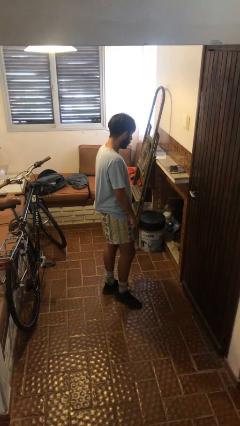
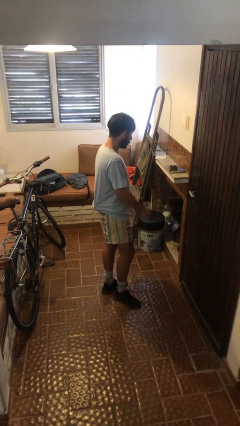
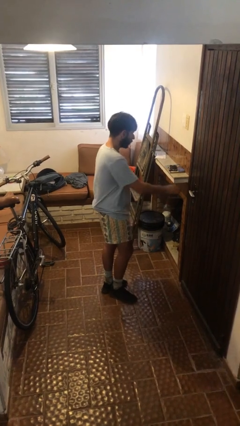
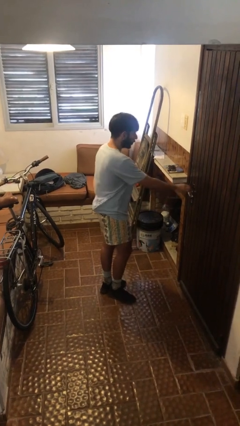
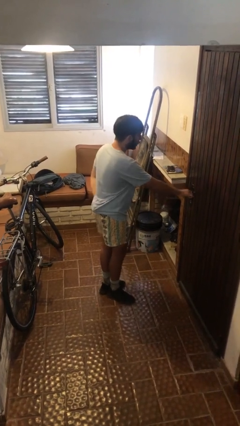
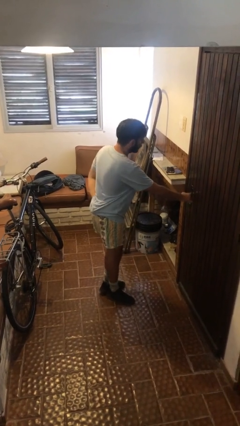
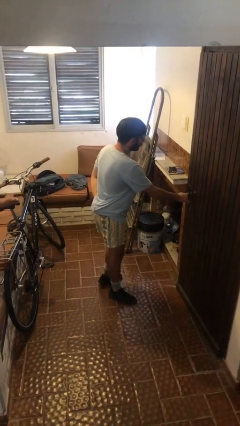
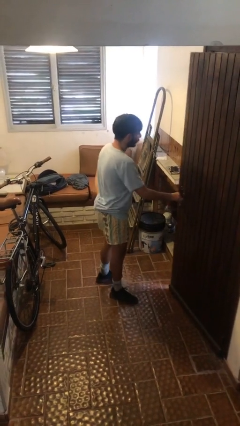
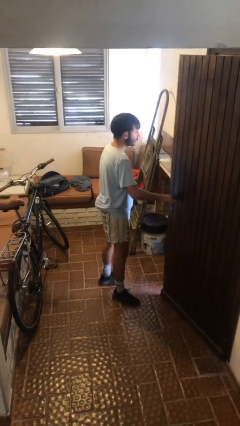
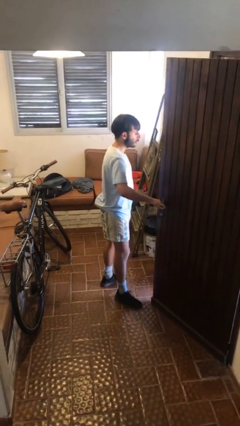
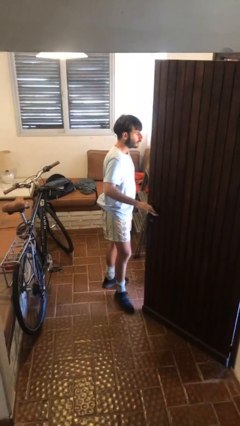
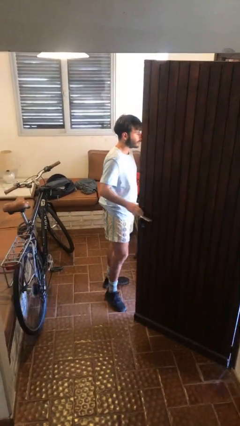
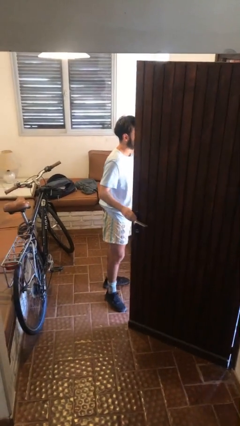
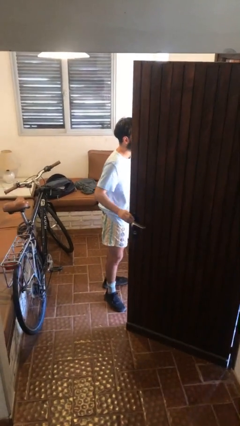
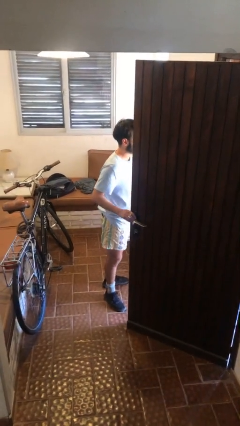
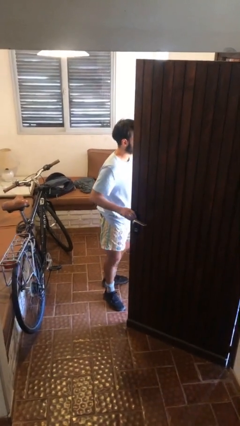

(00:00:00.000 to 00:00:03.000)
person opens facility door

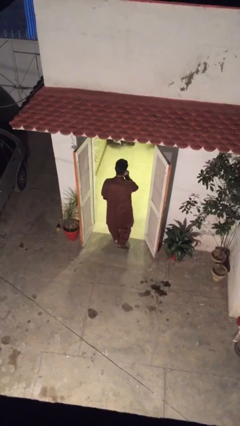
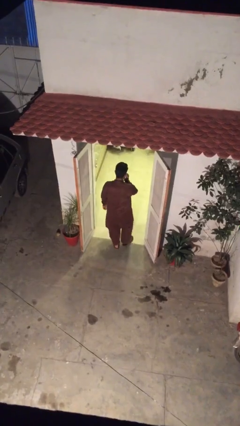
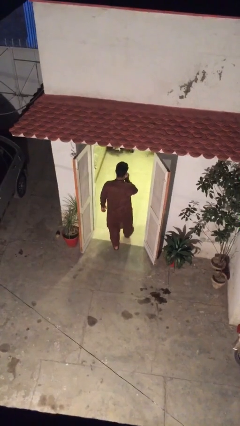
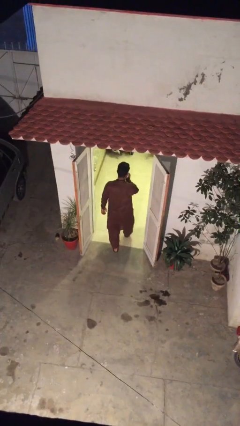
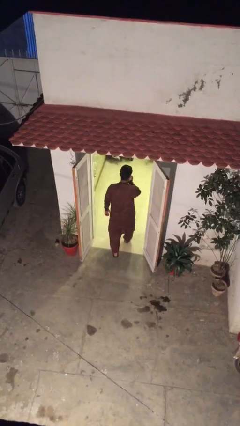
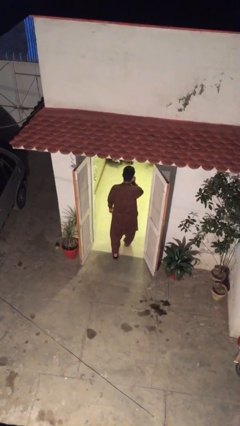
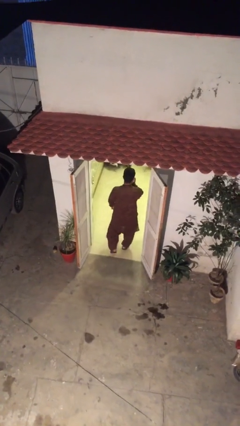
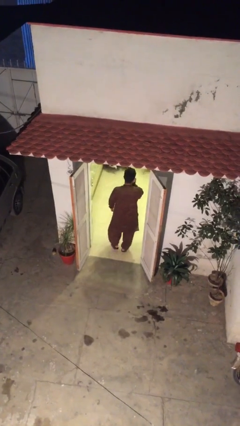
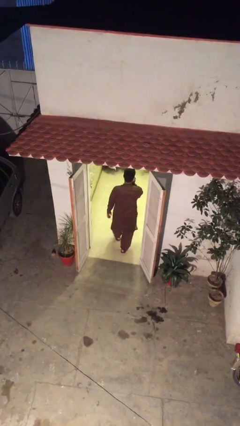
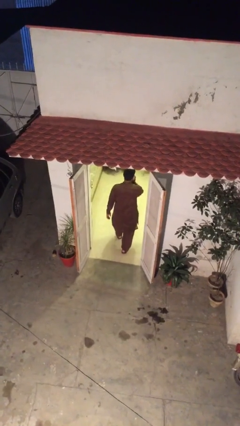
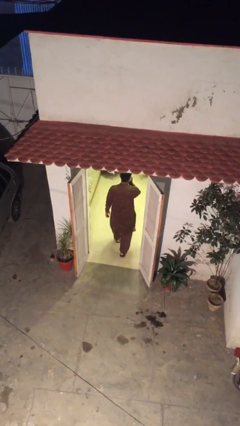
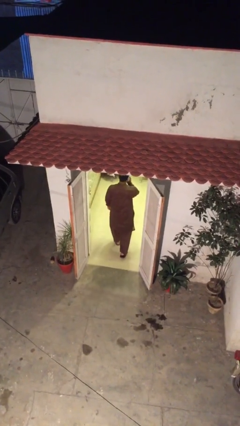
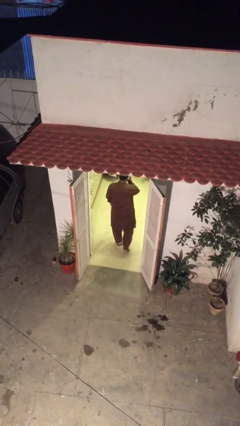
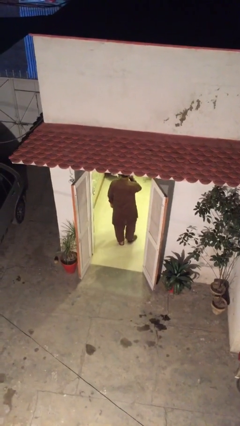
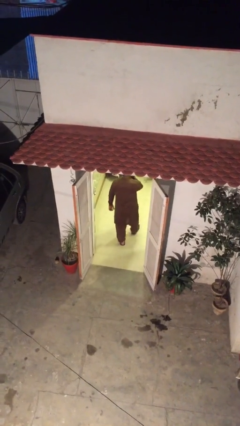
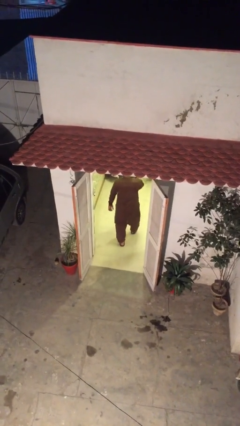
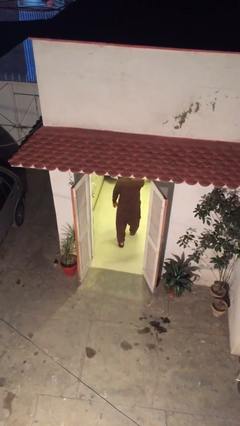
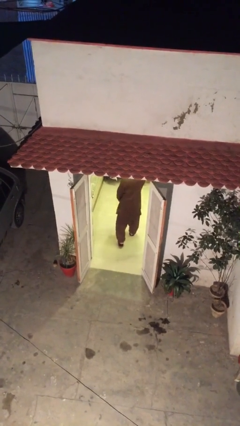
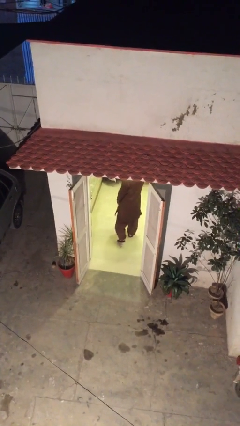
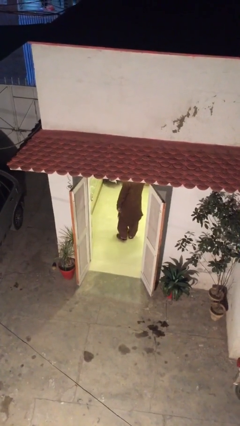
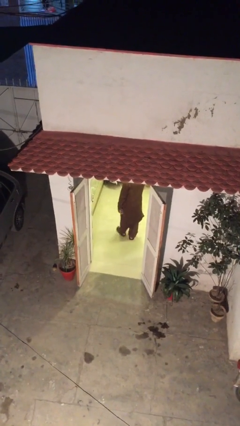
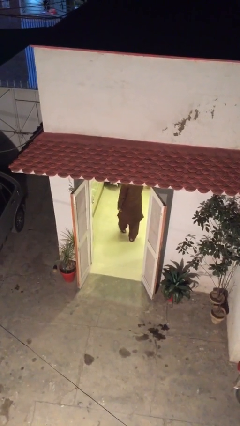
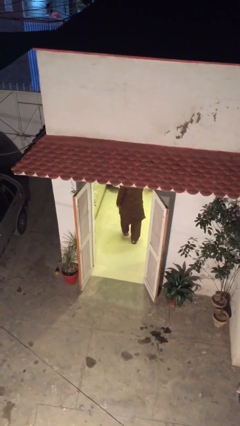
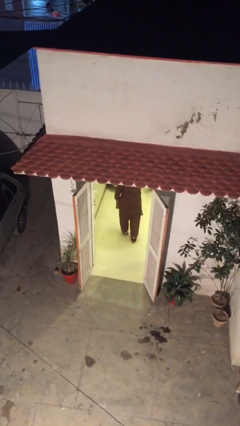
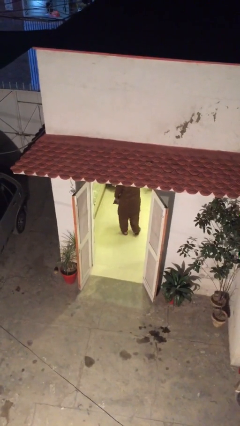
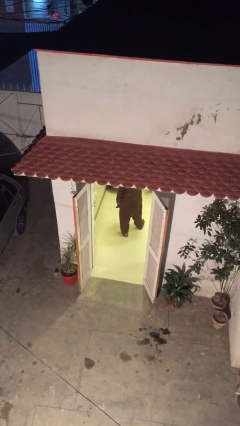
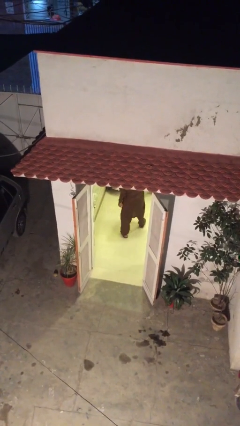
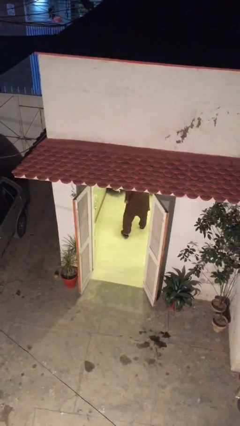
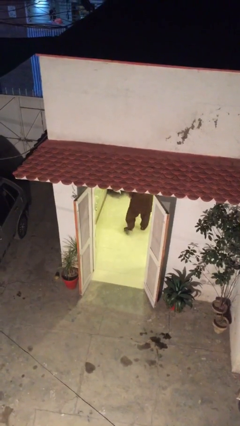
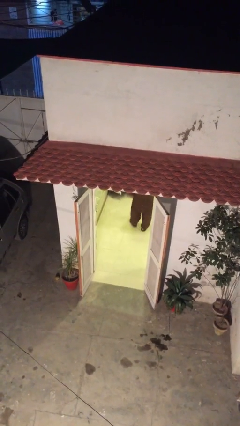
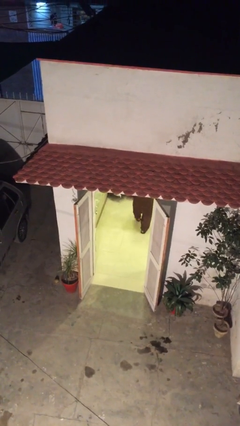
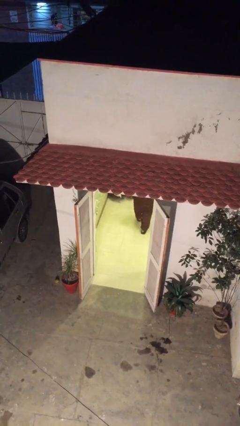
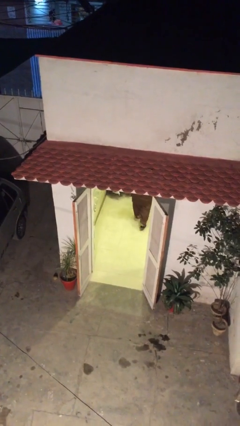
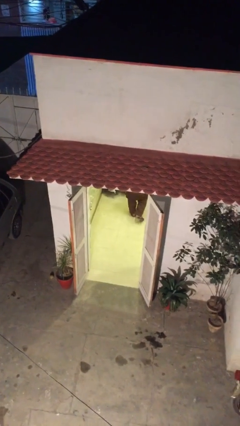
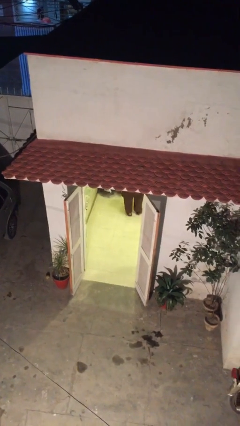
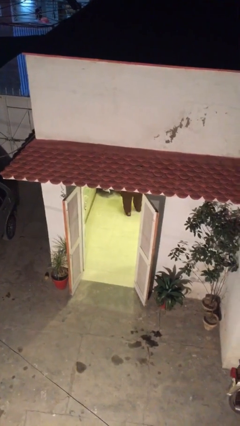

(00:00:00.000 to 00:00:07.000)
person exits scene through structure

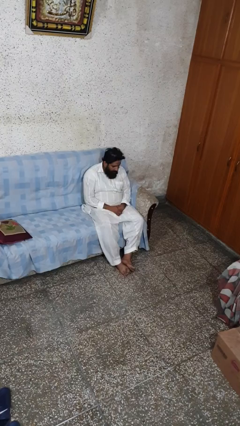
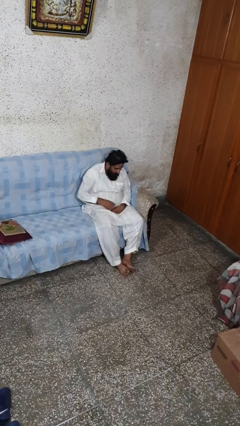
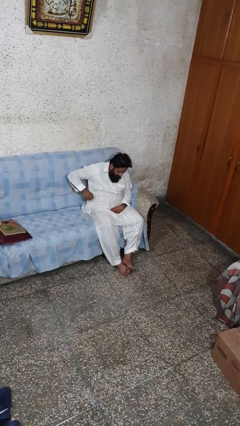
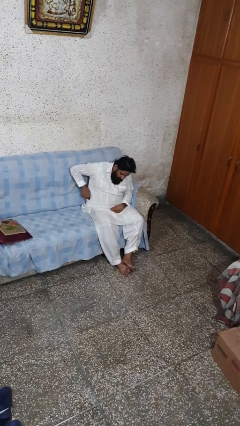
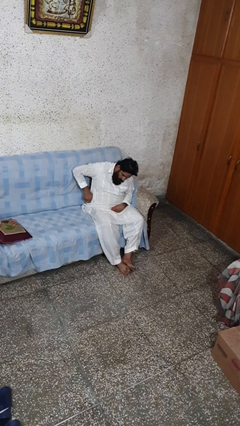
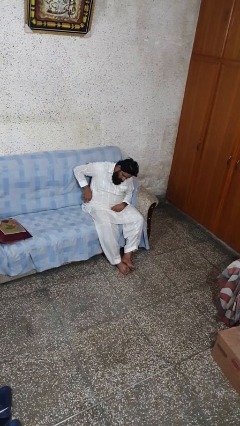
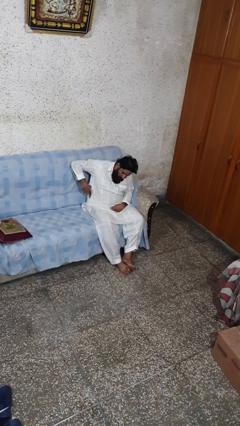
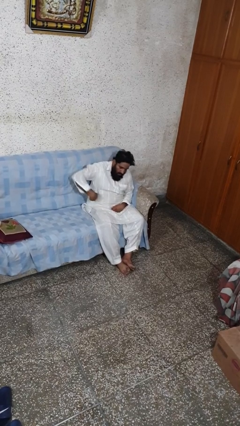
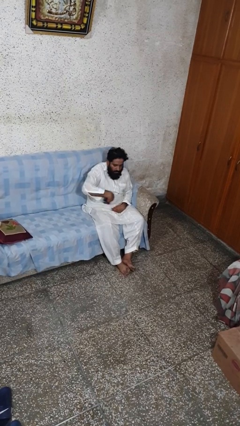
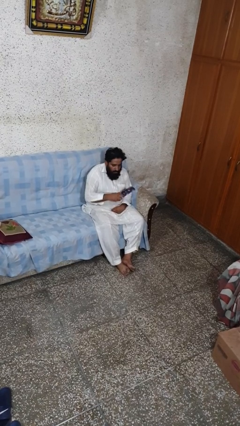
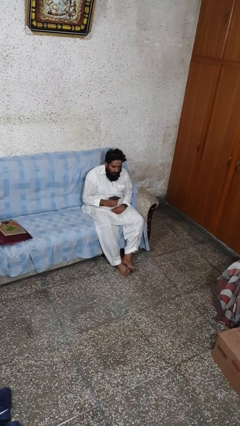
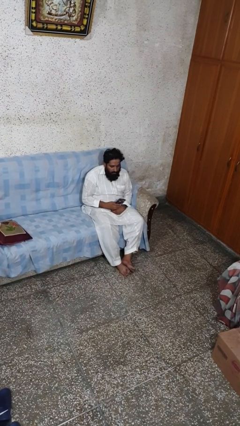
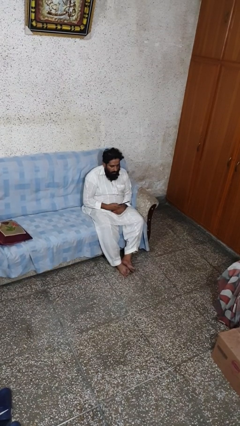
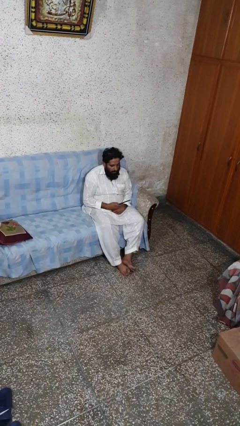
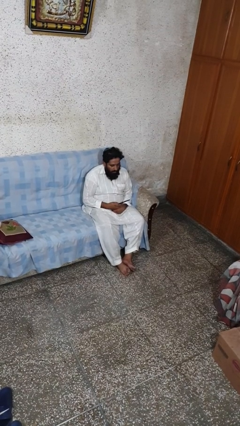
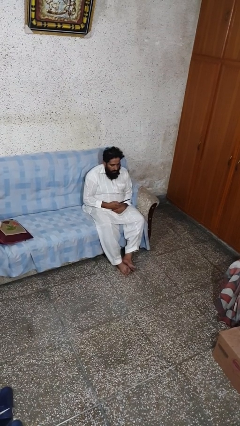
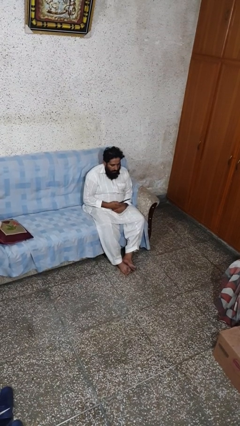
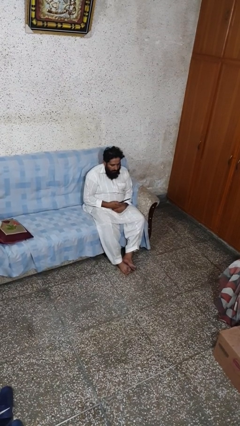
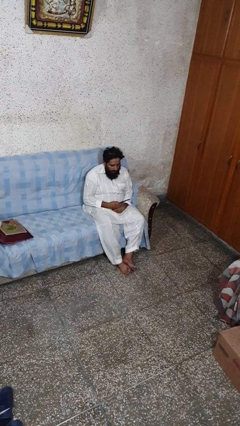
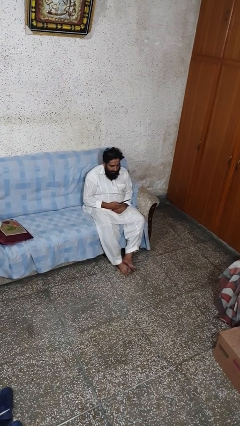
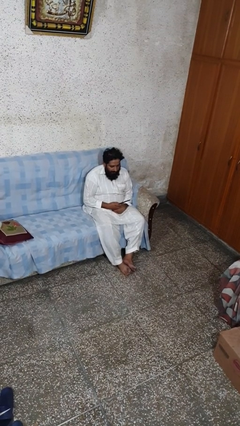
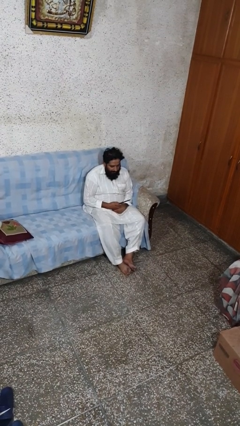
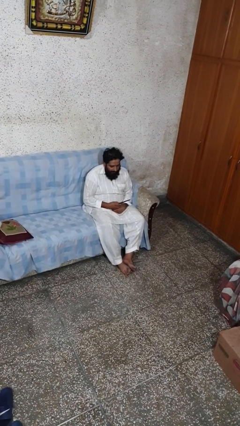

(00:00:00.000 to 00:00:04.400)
person takes phone from pocket

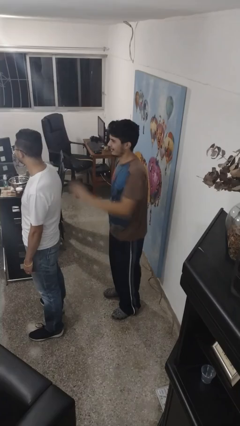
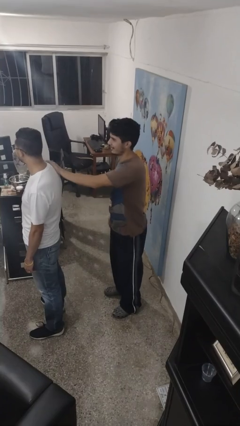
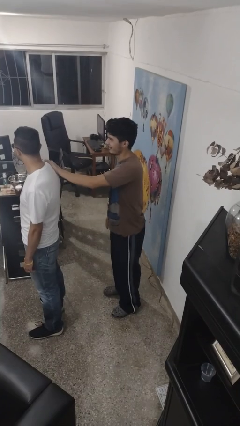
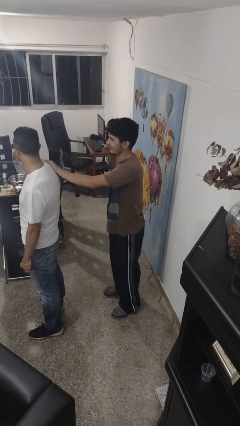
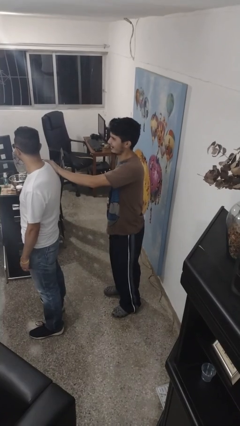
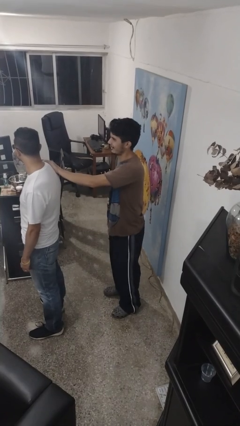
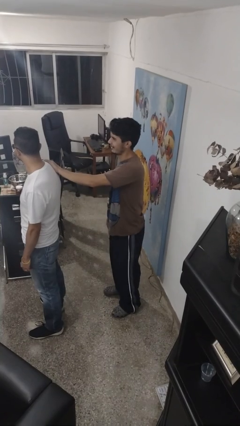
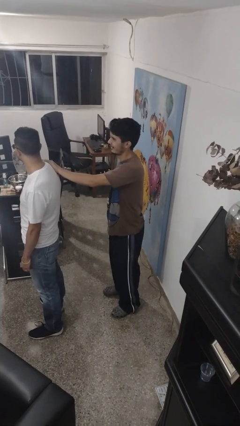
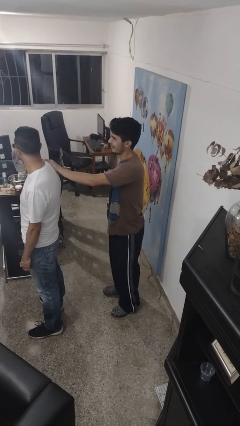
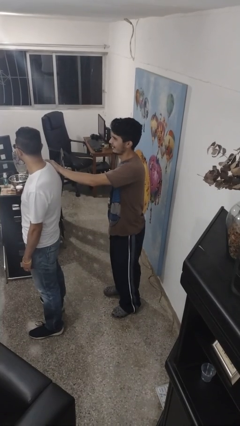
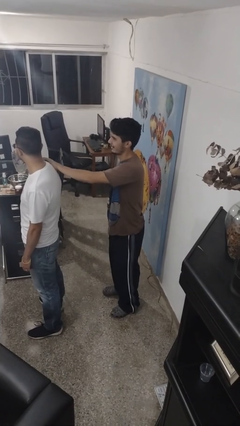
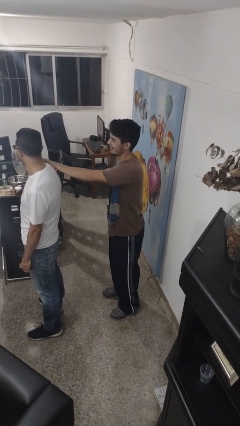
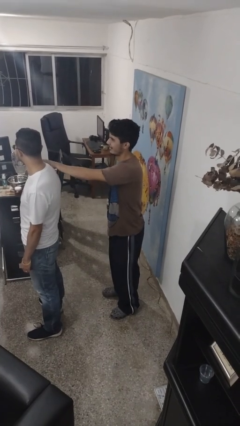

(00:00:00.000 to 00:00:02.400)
person grabs person by shoulder

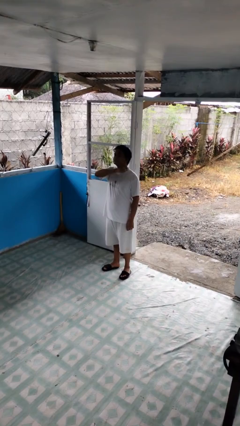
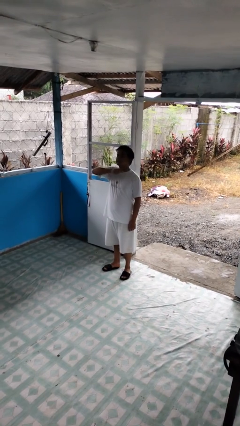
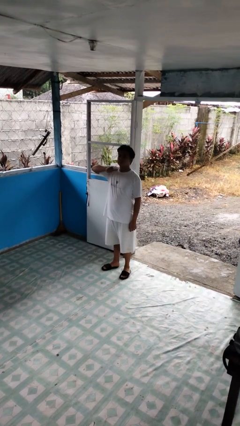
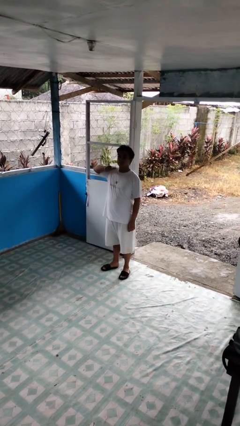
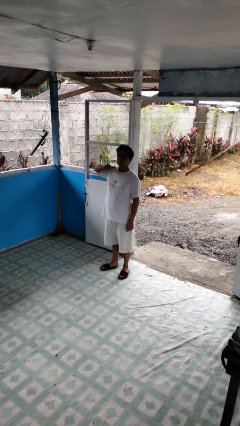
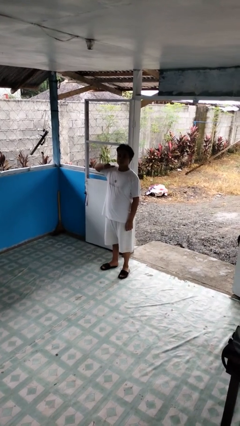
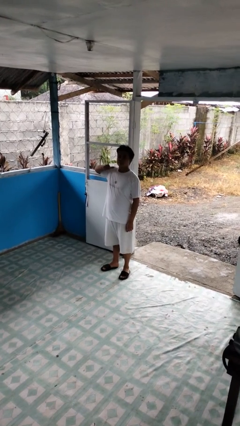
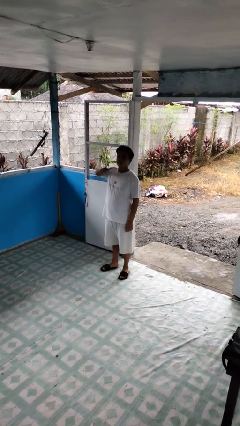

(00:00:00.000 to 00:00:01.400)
person gestures cut
